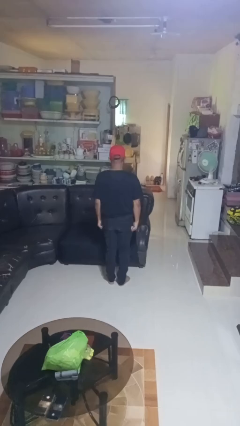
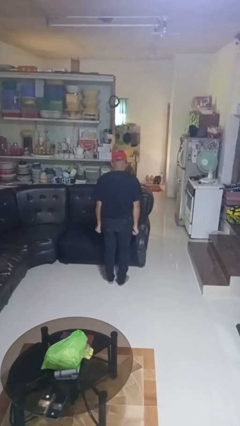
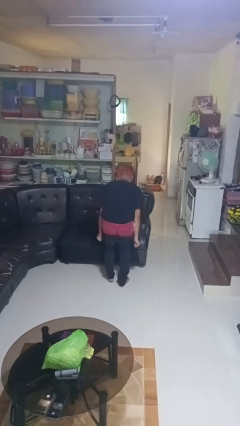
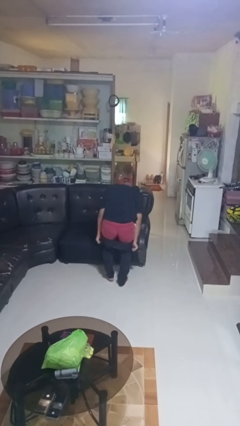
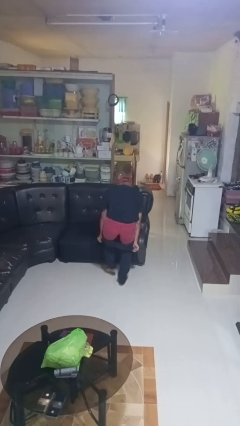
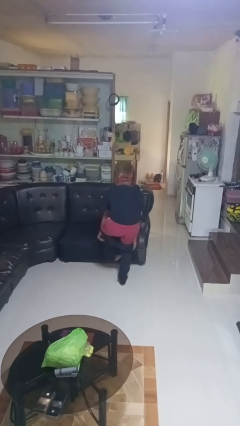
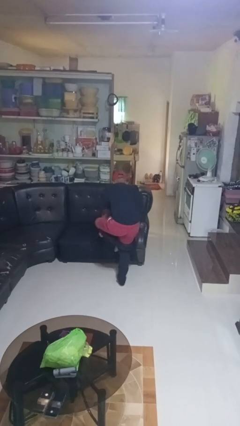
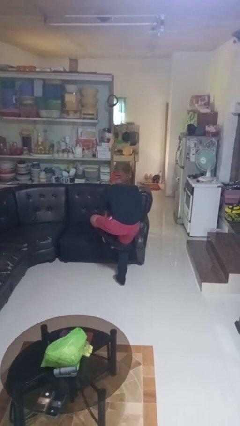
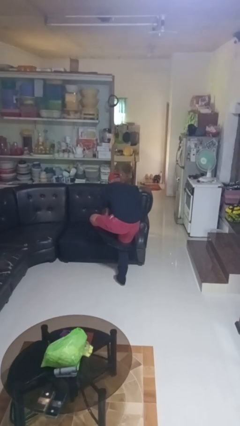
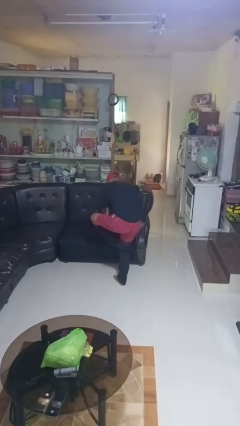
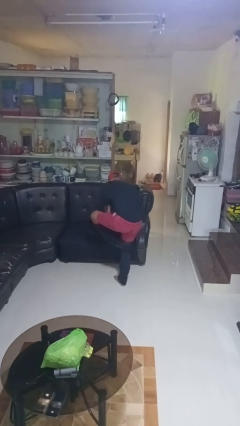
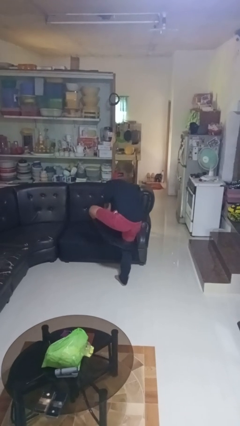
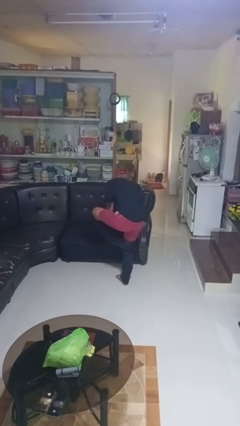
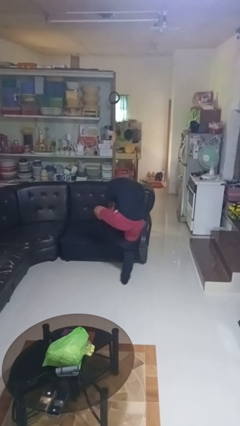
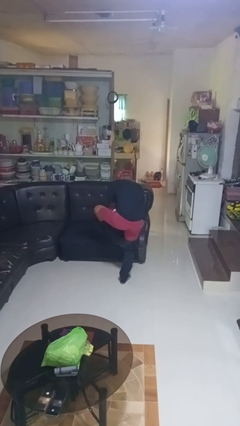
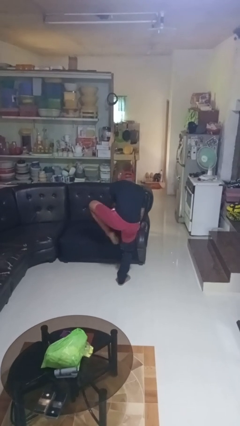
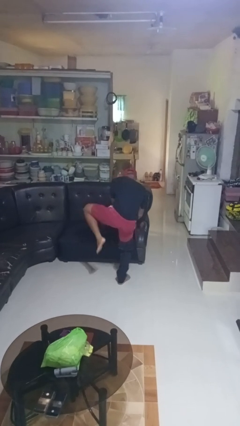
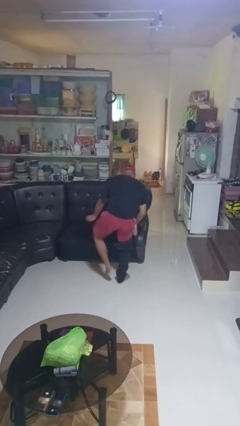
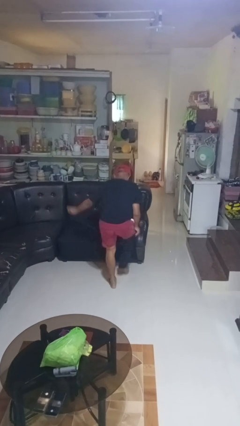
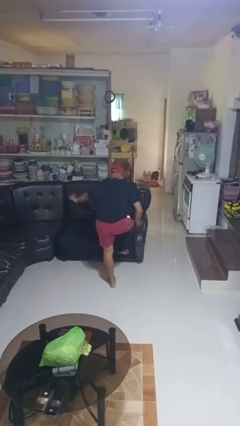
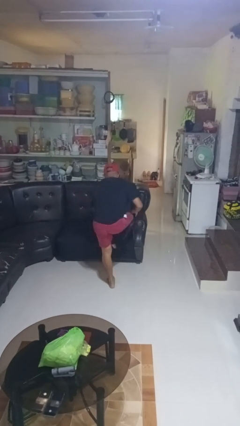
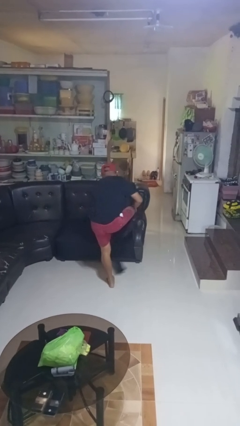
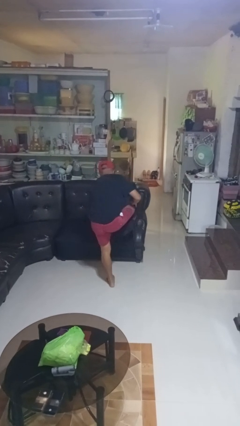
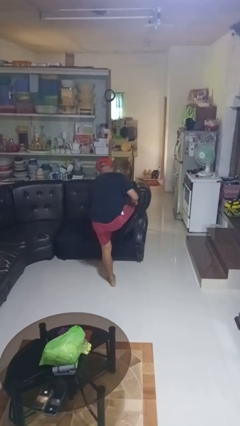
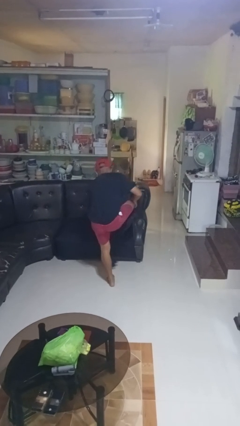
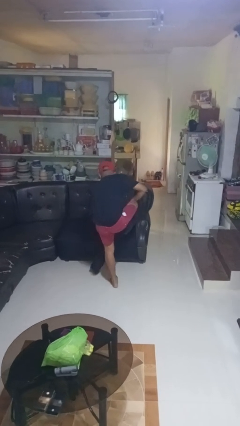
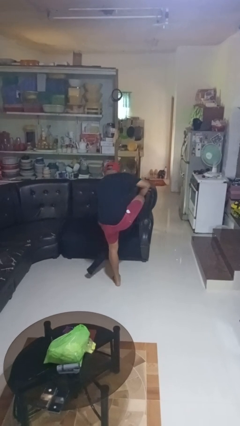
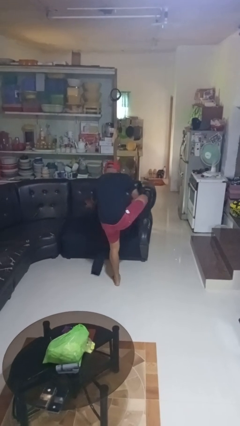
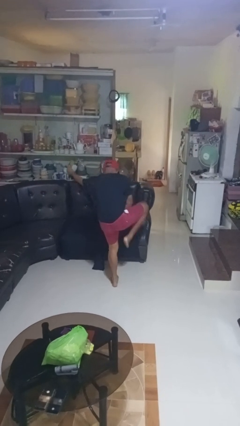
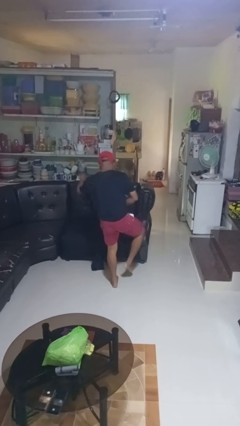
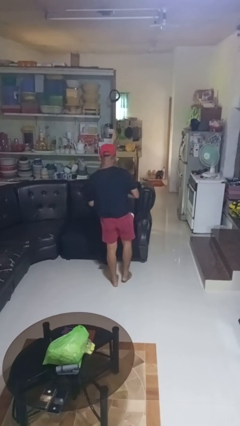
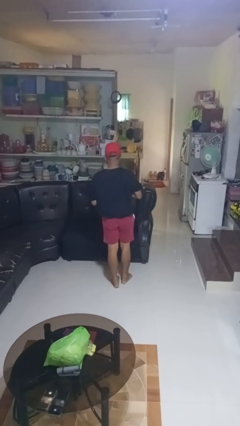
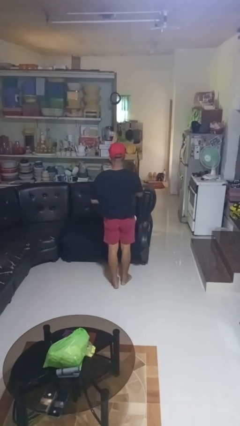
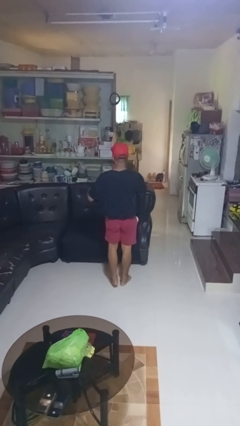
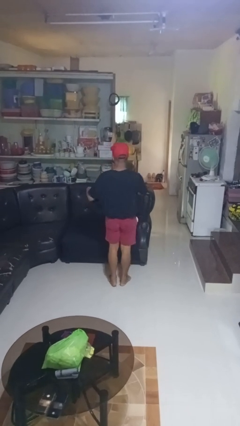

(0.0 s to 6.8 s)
person takes off pants

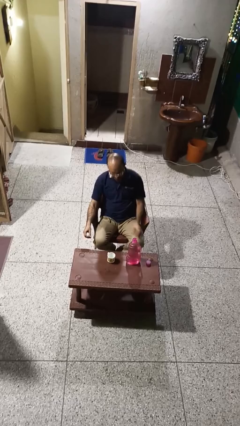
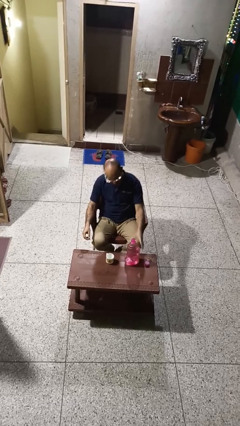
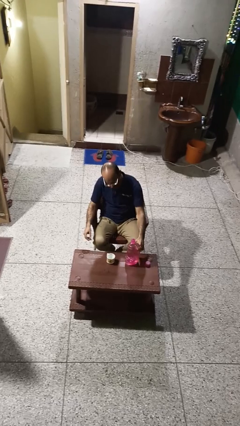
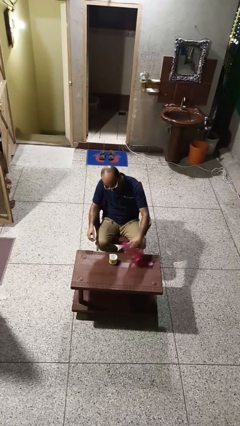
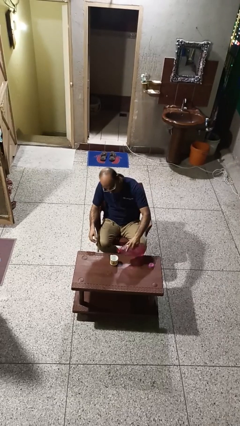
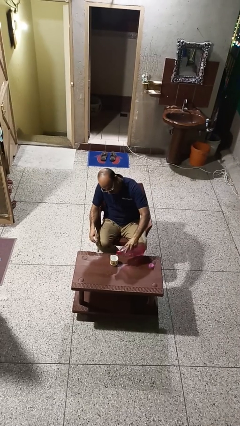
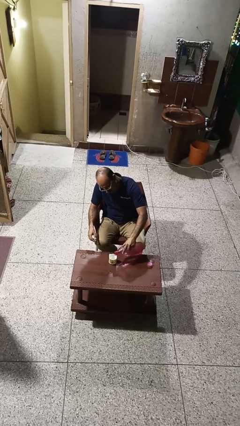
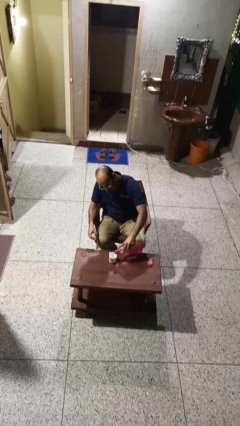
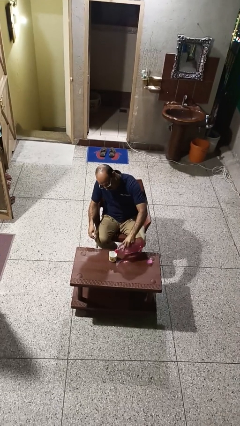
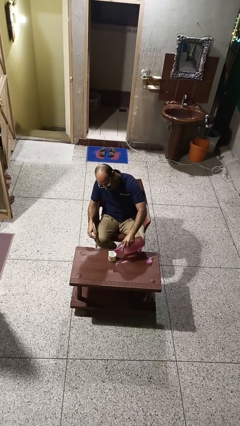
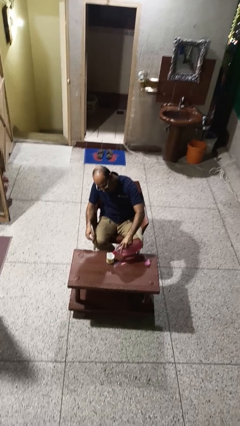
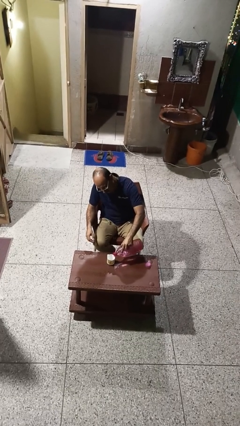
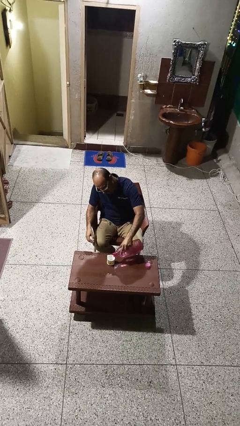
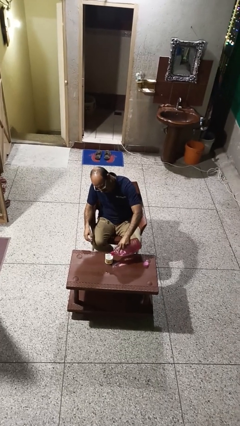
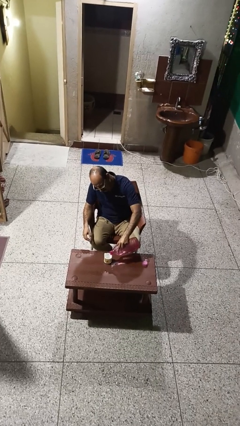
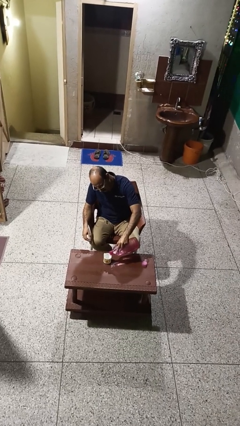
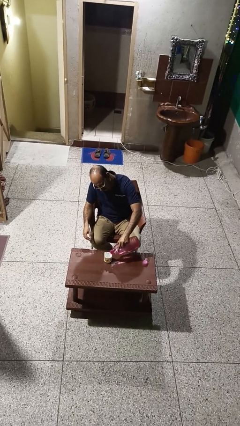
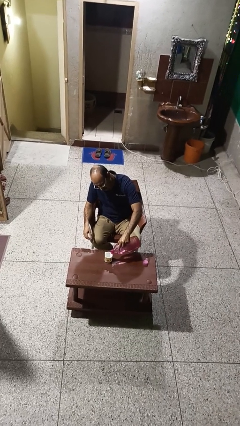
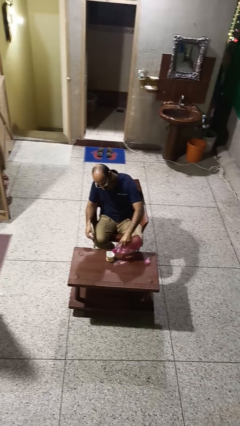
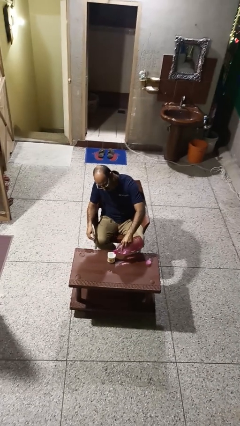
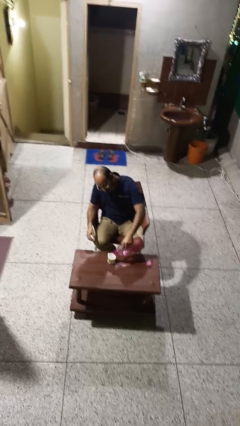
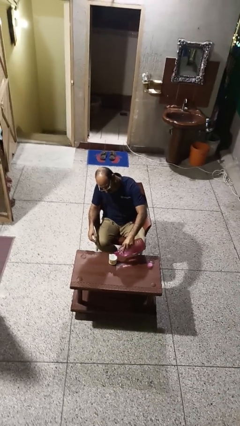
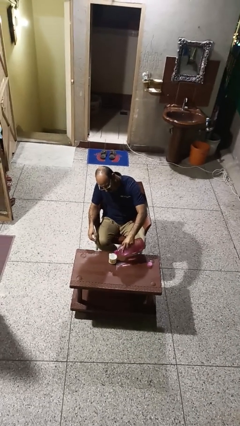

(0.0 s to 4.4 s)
person pours liquid into cup

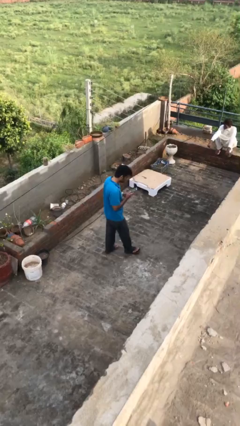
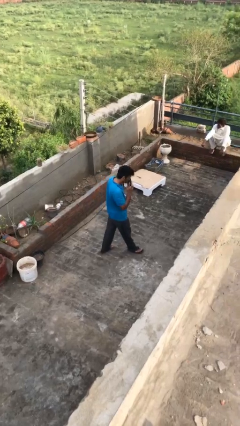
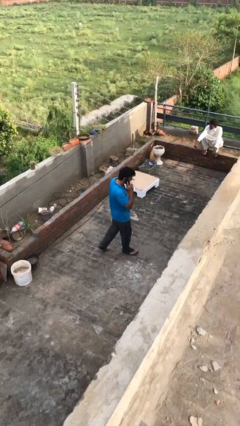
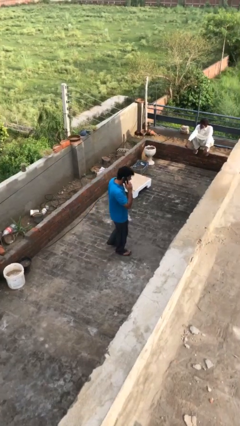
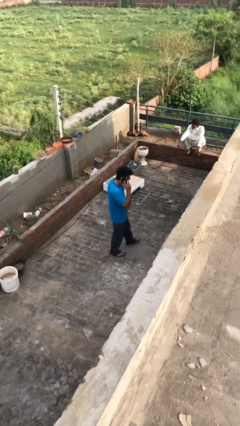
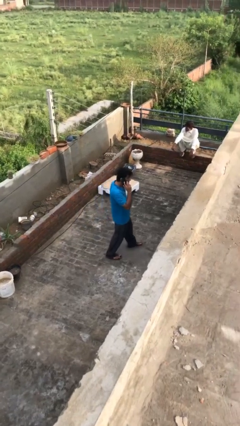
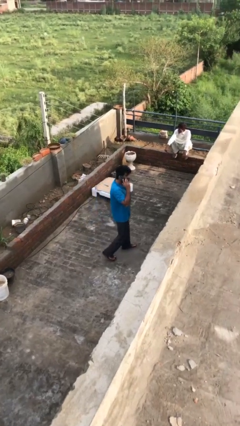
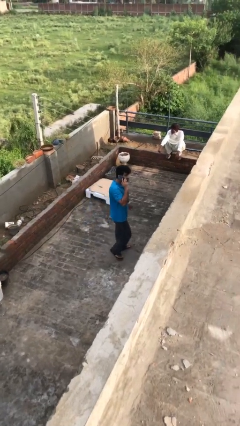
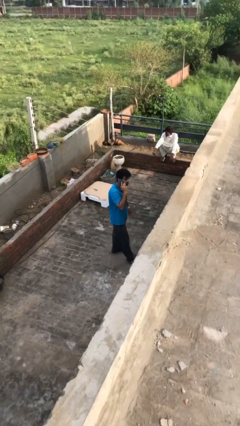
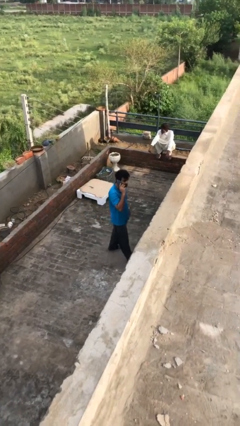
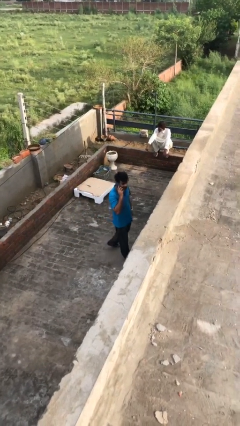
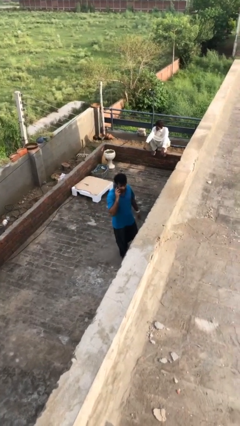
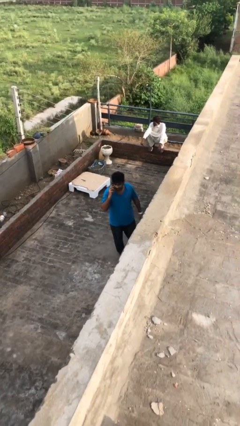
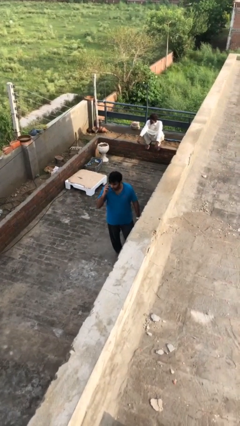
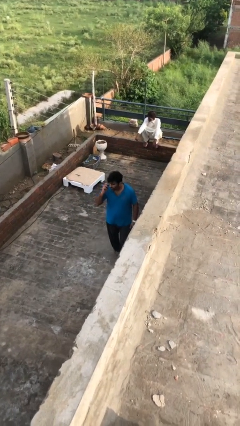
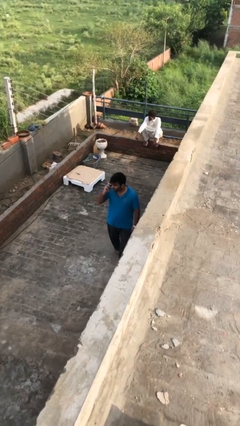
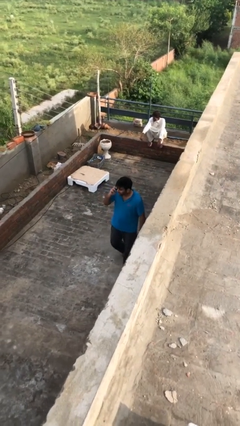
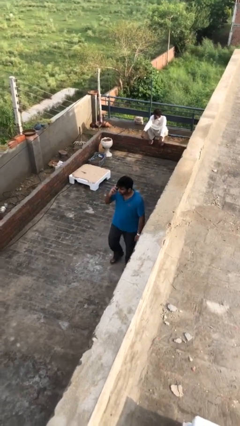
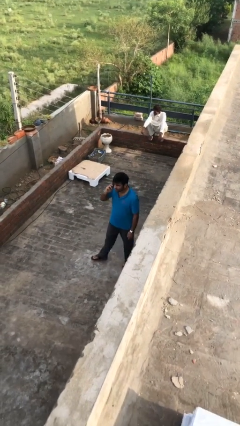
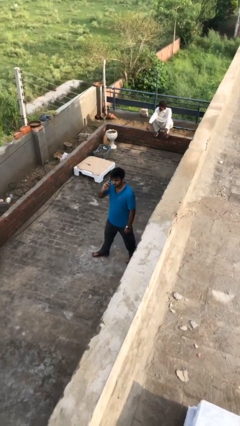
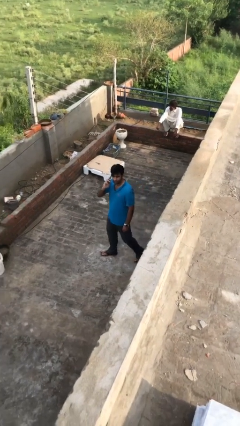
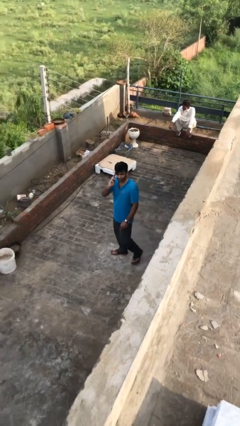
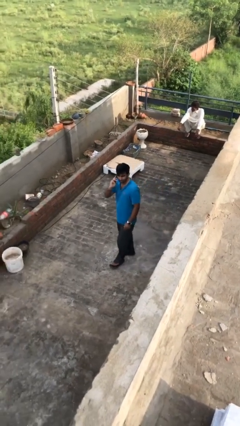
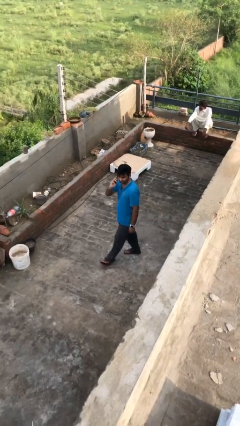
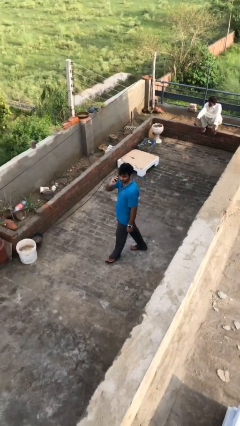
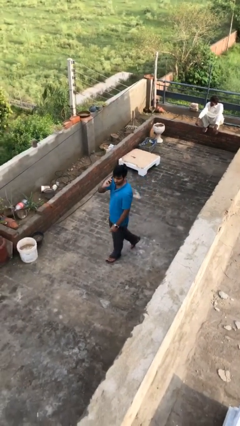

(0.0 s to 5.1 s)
person talks on phone

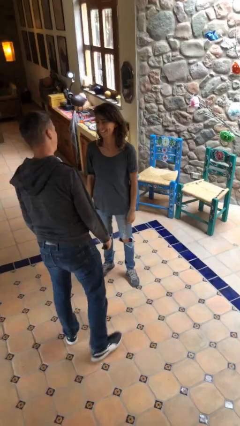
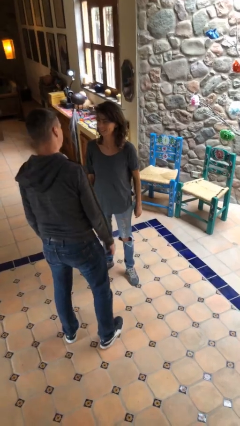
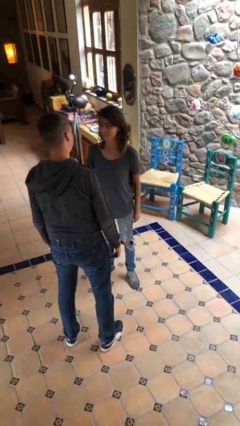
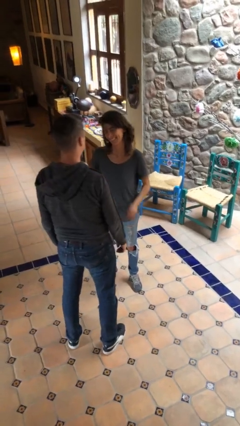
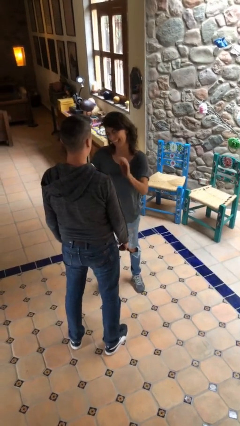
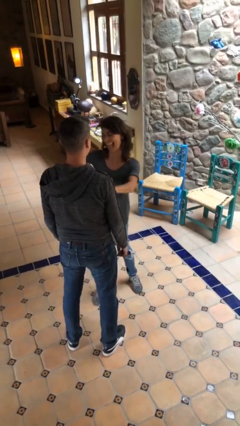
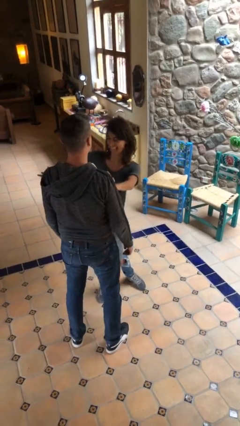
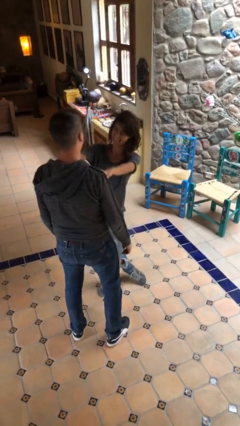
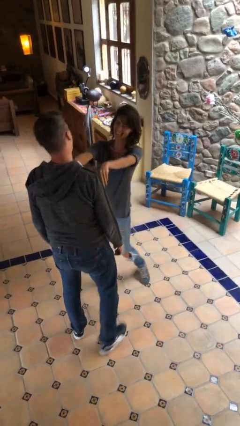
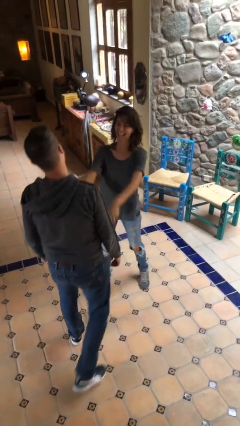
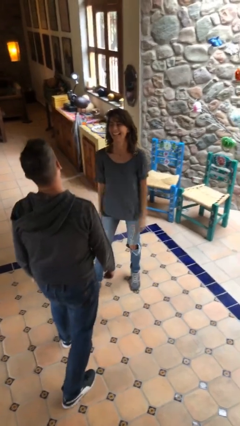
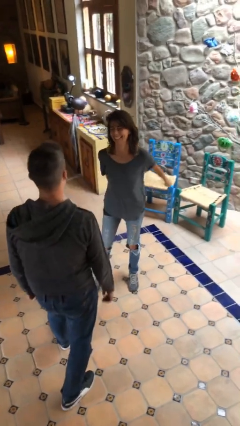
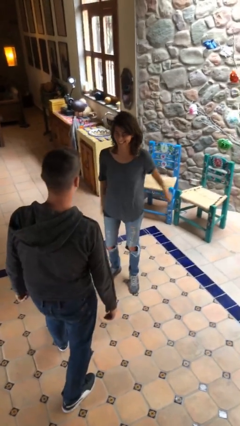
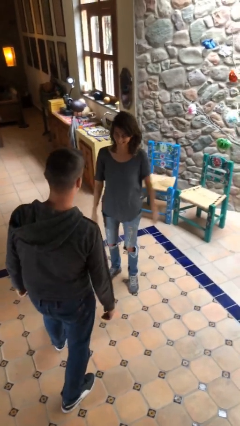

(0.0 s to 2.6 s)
person shoves person
